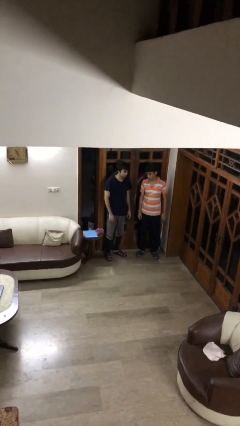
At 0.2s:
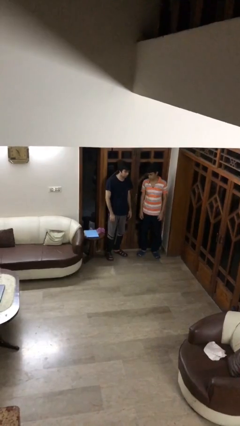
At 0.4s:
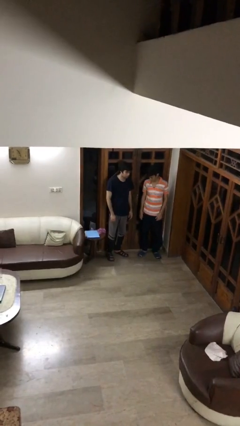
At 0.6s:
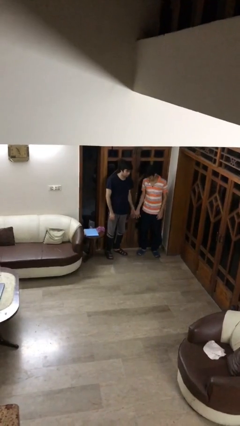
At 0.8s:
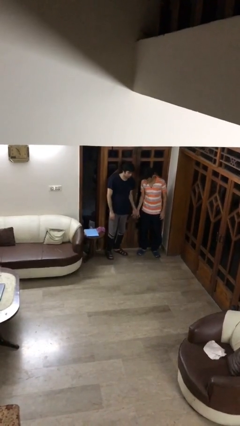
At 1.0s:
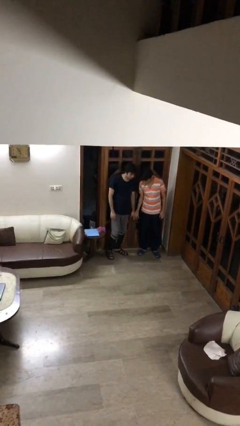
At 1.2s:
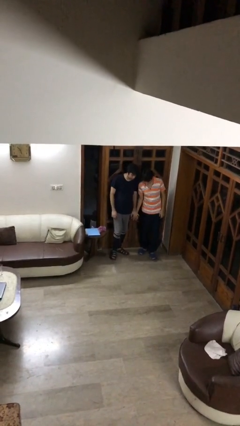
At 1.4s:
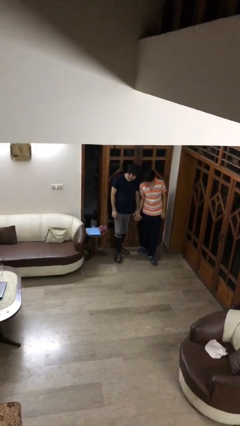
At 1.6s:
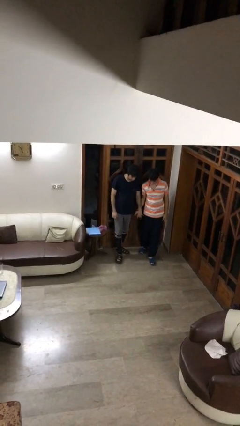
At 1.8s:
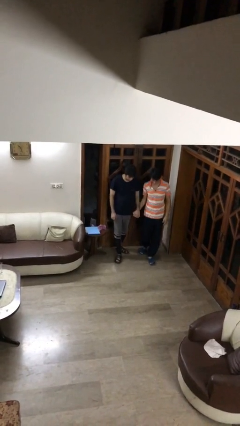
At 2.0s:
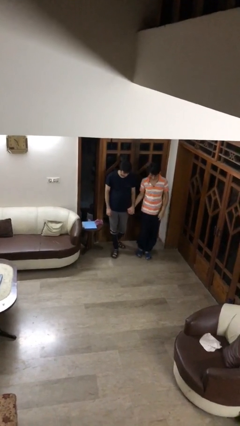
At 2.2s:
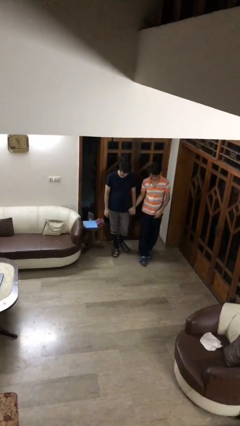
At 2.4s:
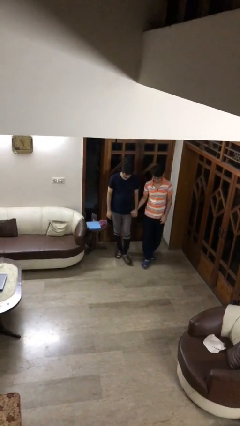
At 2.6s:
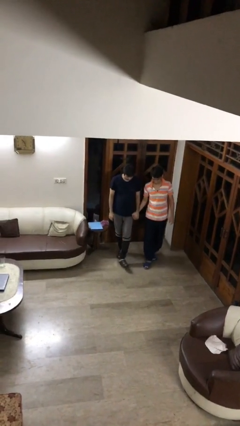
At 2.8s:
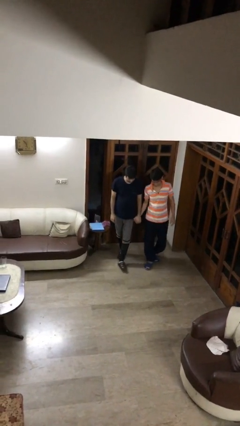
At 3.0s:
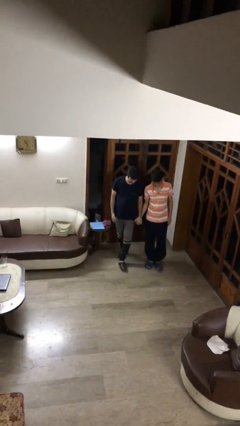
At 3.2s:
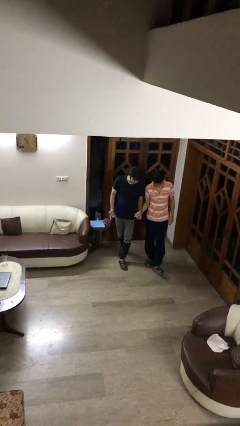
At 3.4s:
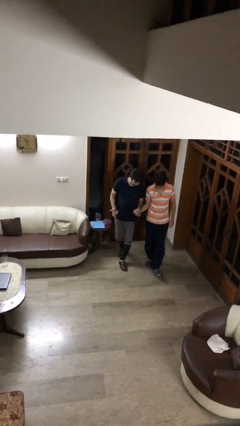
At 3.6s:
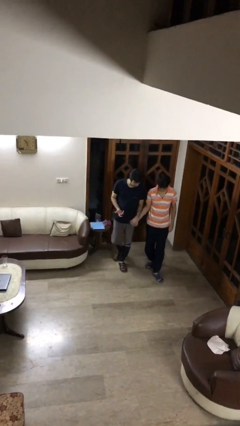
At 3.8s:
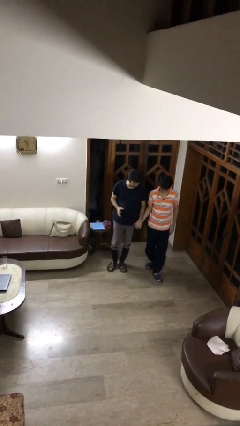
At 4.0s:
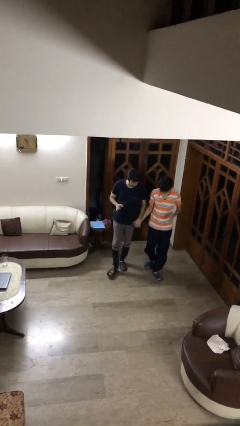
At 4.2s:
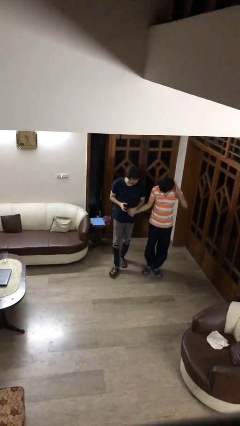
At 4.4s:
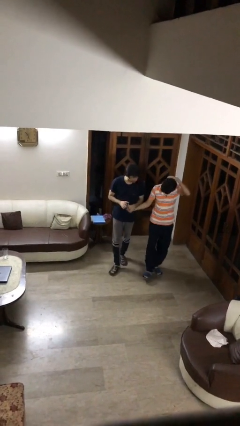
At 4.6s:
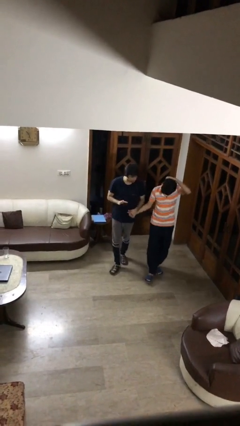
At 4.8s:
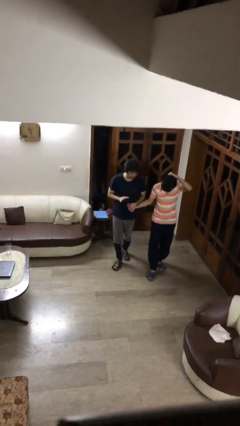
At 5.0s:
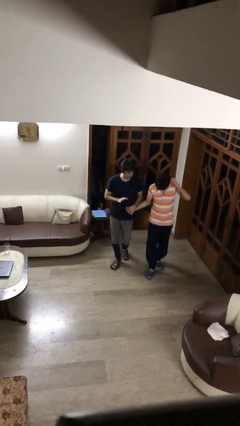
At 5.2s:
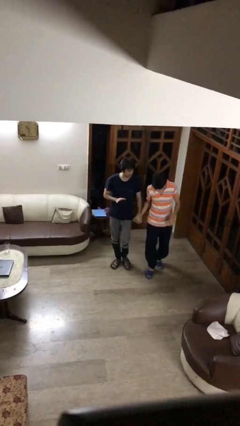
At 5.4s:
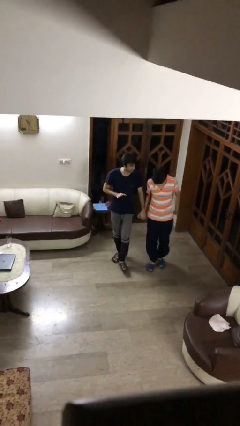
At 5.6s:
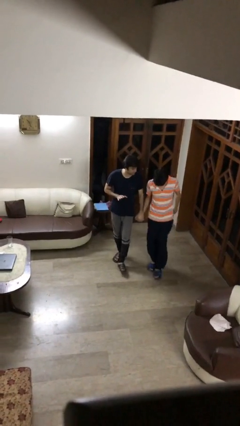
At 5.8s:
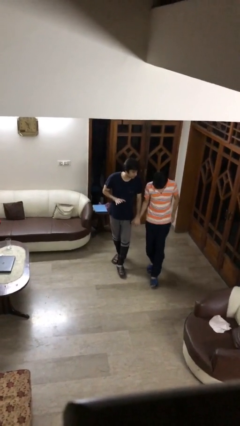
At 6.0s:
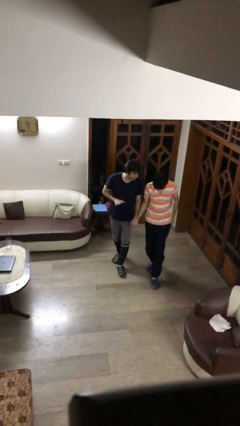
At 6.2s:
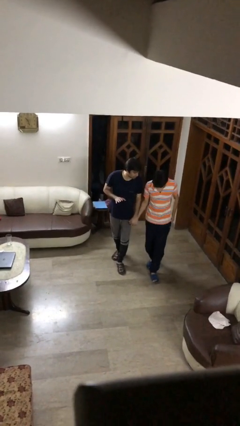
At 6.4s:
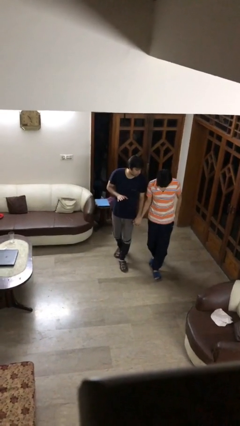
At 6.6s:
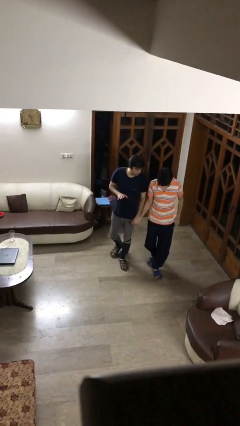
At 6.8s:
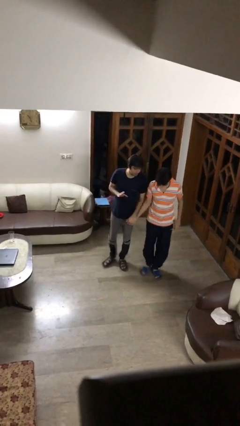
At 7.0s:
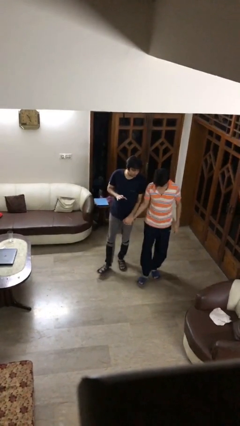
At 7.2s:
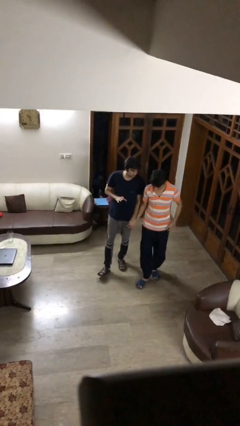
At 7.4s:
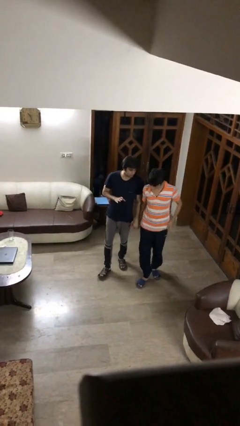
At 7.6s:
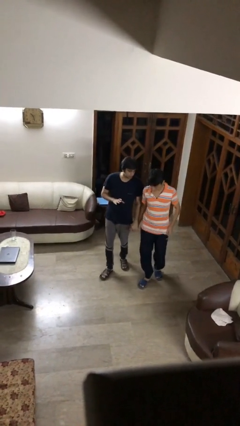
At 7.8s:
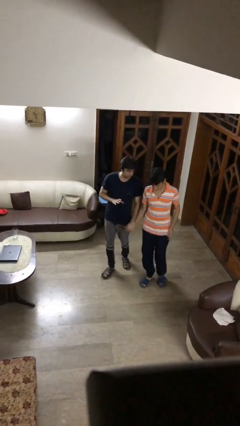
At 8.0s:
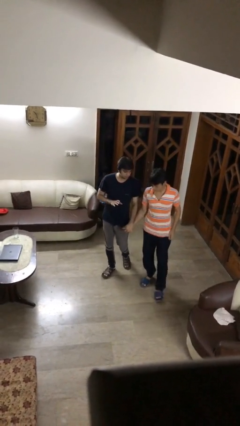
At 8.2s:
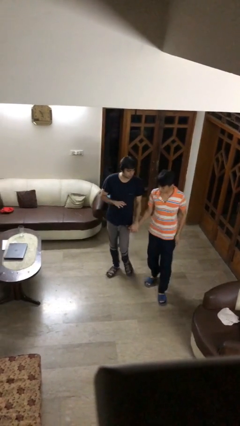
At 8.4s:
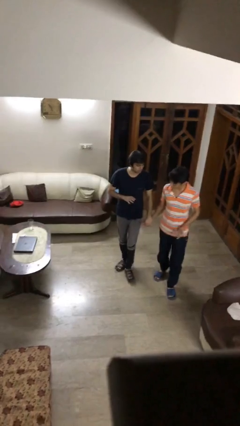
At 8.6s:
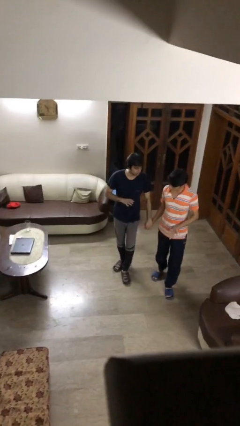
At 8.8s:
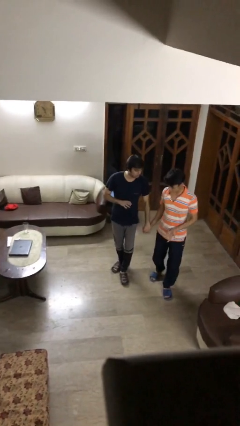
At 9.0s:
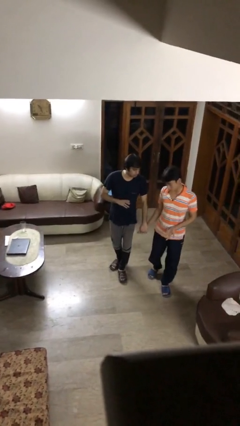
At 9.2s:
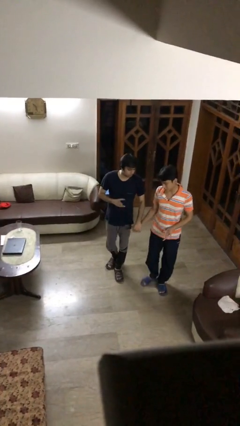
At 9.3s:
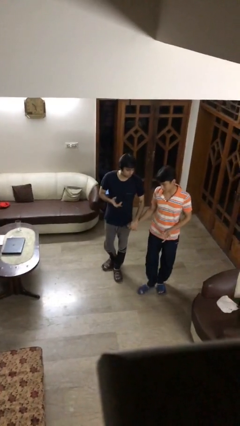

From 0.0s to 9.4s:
person holds hand

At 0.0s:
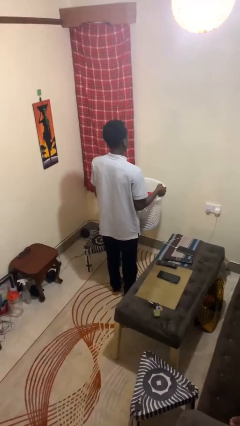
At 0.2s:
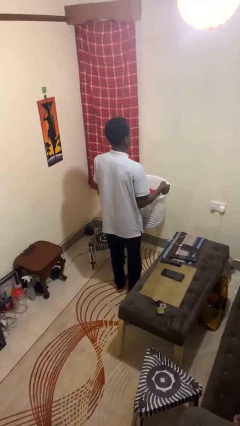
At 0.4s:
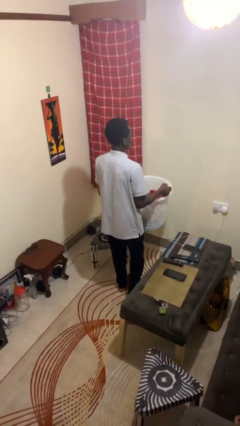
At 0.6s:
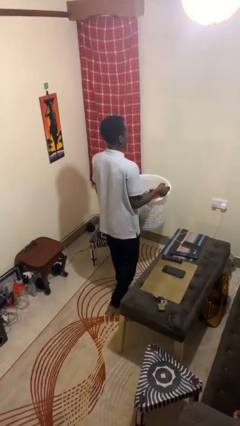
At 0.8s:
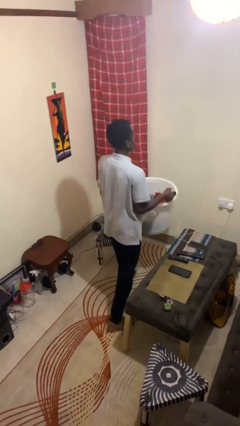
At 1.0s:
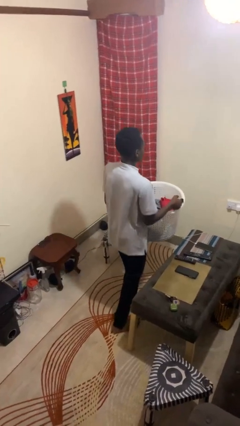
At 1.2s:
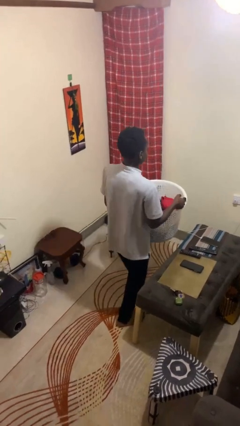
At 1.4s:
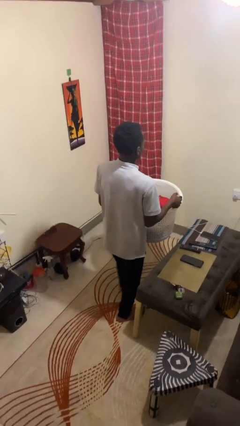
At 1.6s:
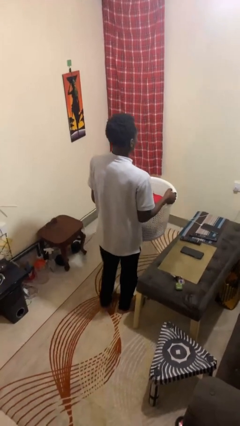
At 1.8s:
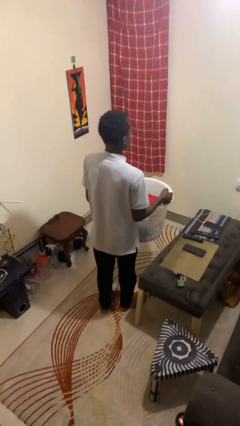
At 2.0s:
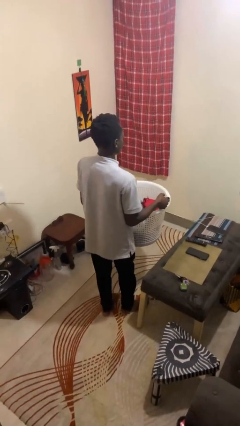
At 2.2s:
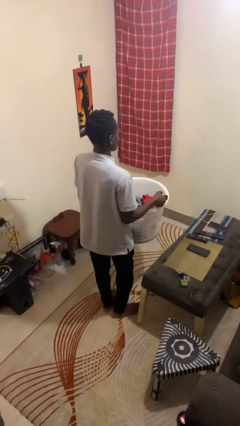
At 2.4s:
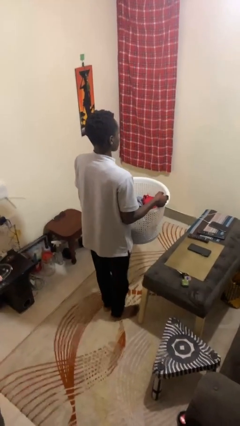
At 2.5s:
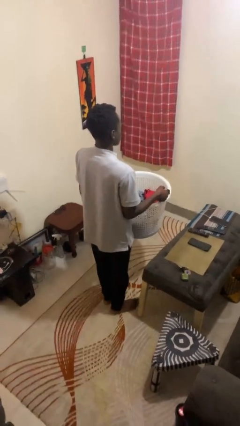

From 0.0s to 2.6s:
person carries laundry basket

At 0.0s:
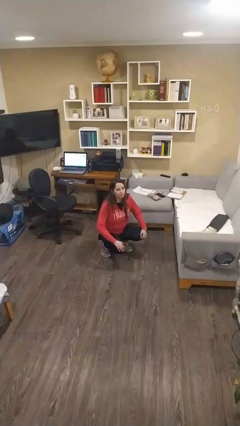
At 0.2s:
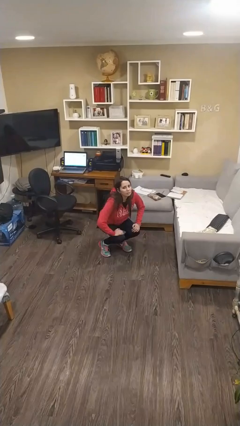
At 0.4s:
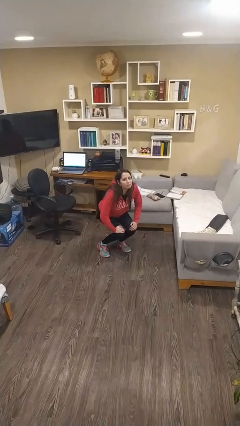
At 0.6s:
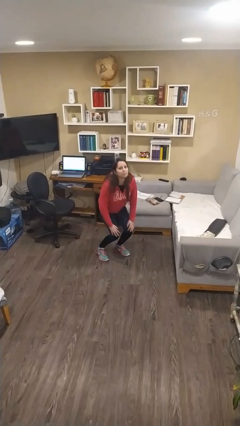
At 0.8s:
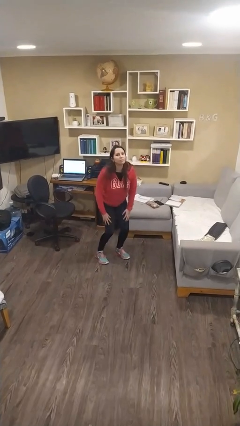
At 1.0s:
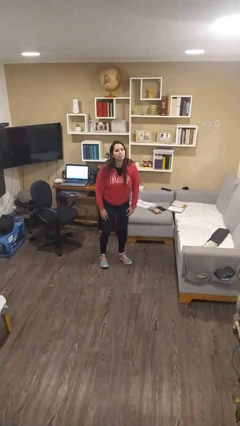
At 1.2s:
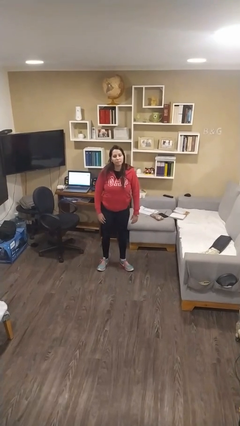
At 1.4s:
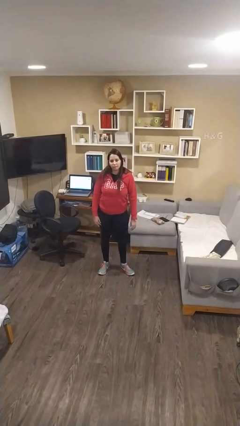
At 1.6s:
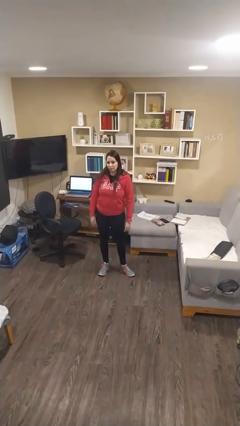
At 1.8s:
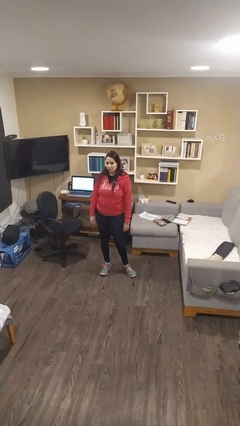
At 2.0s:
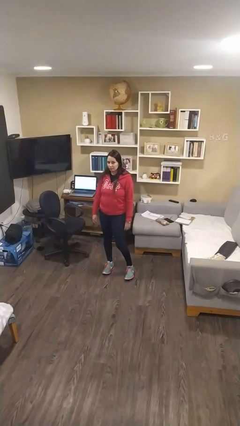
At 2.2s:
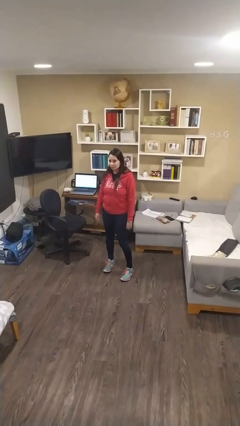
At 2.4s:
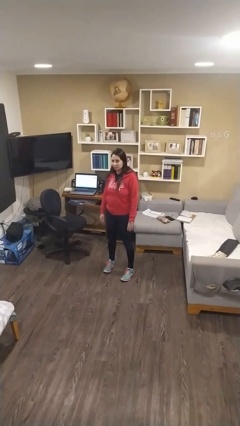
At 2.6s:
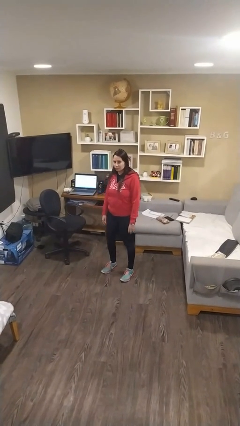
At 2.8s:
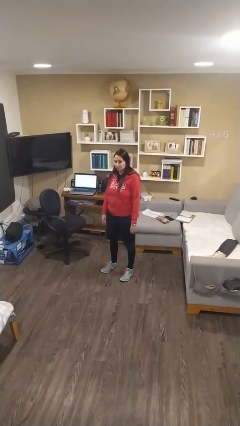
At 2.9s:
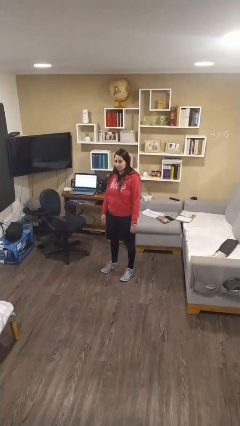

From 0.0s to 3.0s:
person stands up

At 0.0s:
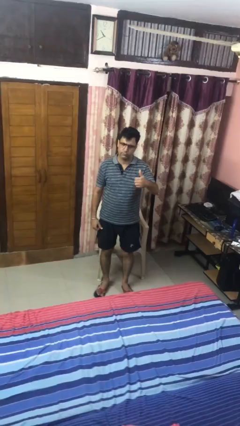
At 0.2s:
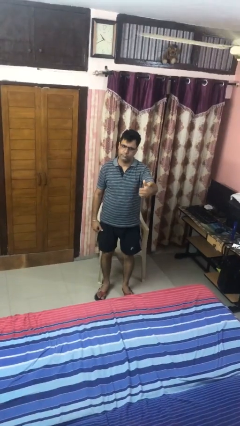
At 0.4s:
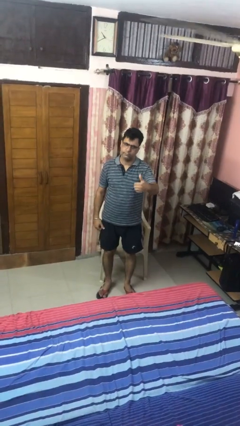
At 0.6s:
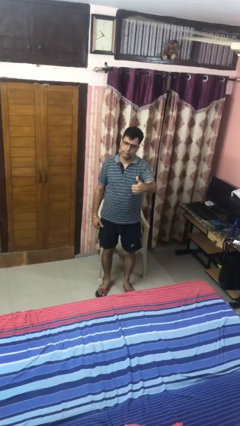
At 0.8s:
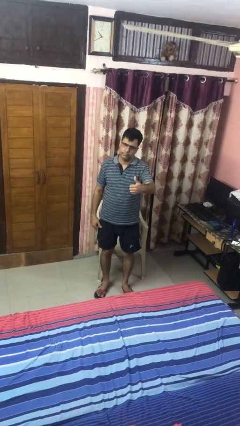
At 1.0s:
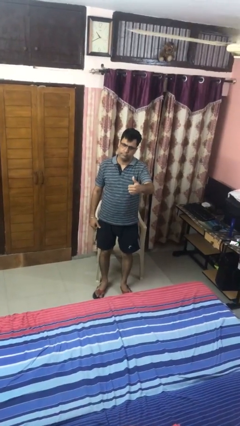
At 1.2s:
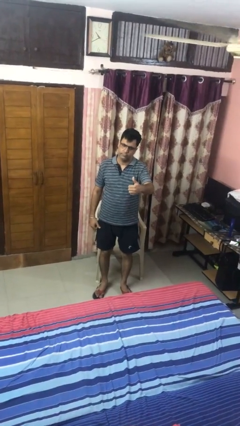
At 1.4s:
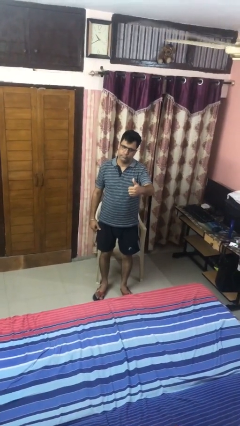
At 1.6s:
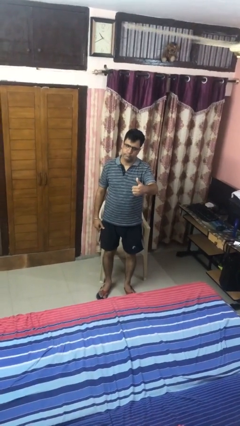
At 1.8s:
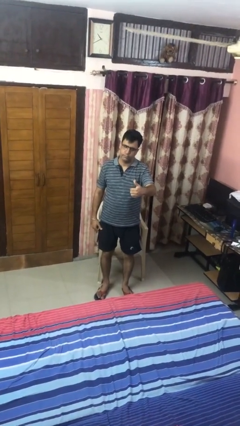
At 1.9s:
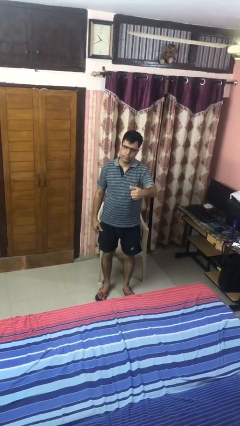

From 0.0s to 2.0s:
person gestures thumbs up

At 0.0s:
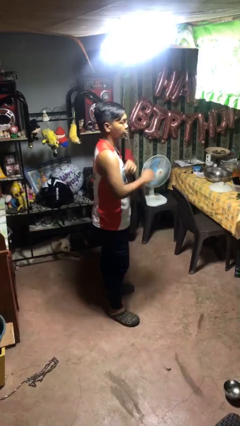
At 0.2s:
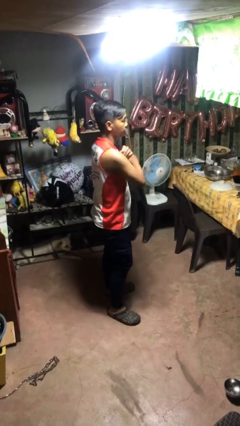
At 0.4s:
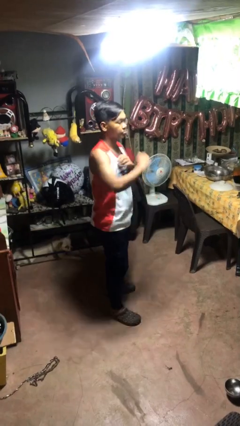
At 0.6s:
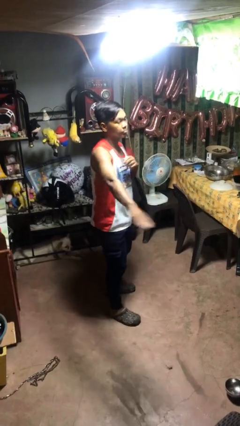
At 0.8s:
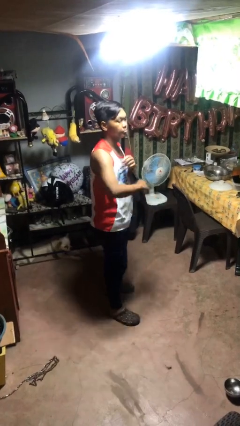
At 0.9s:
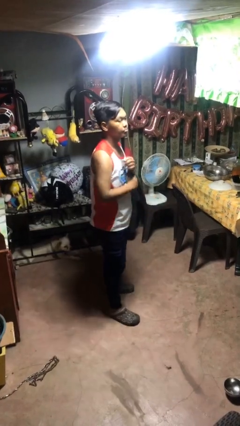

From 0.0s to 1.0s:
person karate chop
